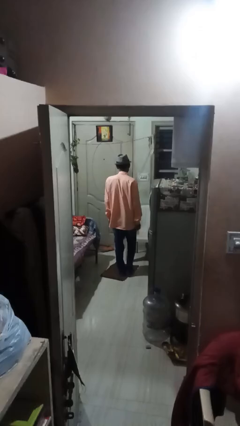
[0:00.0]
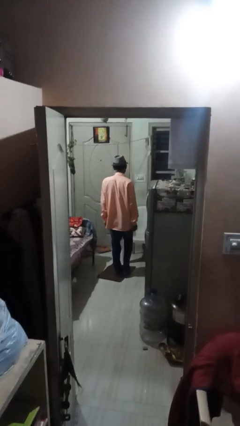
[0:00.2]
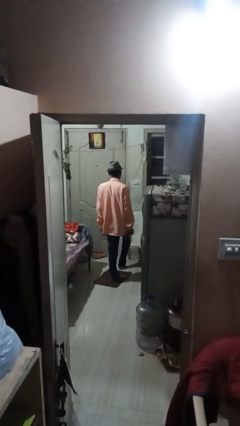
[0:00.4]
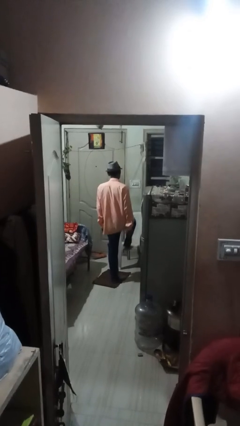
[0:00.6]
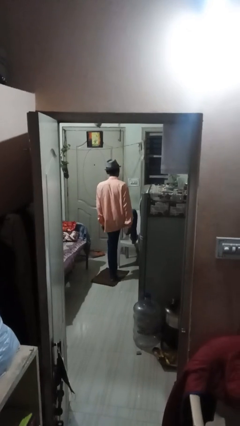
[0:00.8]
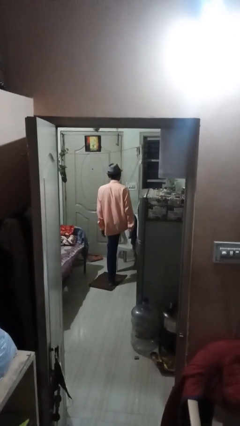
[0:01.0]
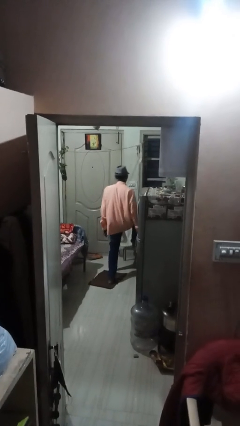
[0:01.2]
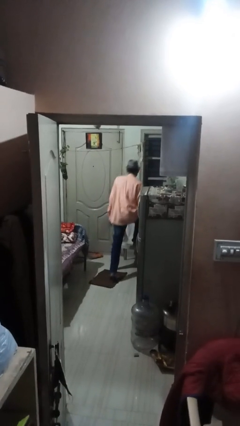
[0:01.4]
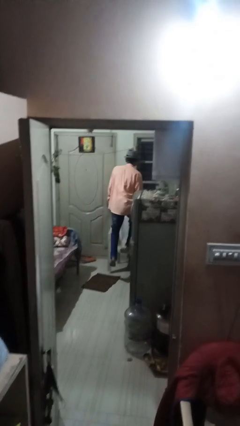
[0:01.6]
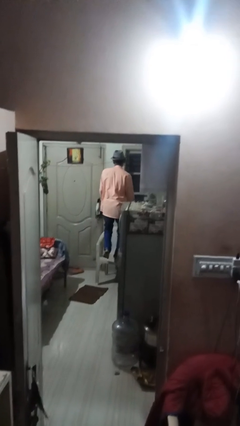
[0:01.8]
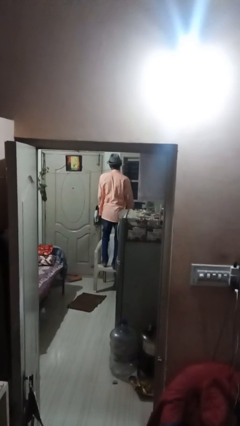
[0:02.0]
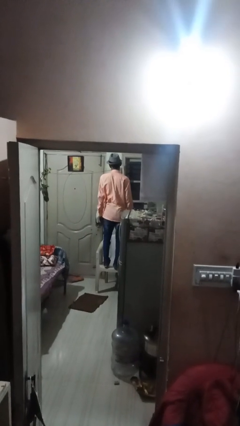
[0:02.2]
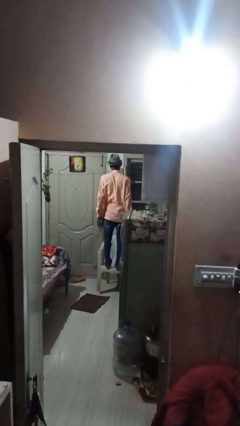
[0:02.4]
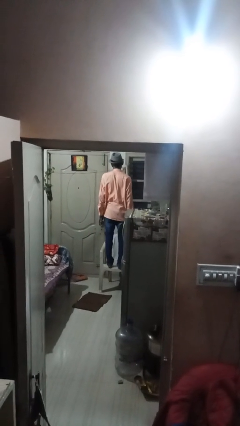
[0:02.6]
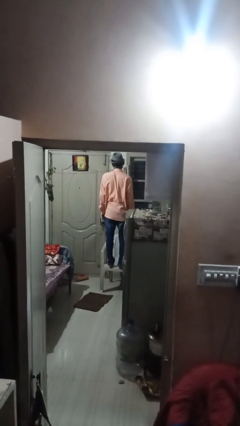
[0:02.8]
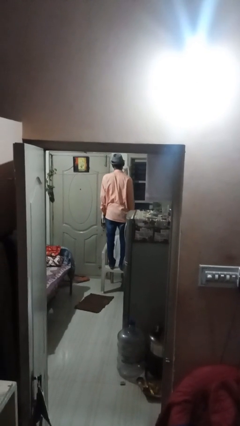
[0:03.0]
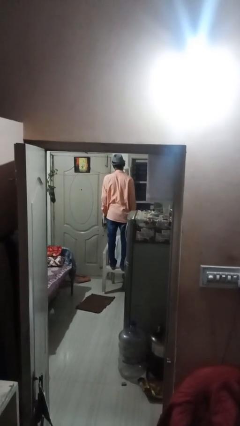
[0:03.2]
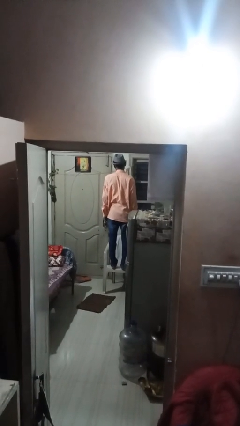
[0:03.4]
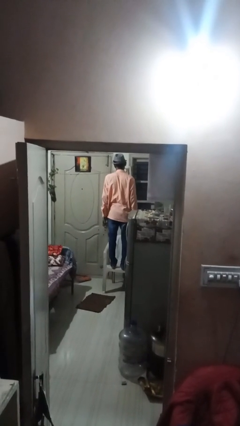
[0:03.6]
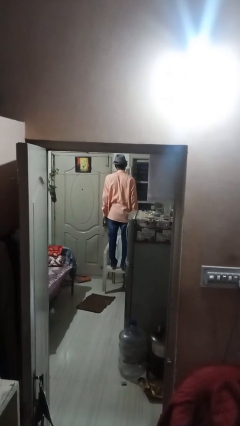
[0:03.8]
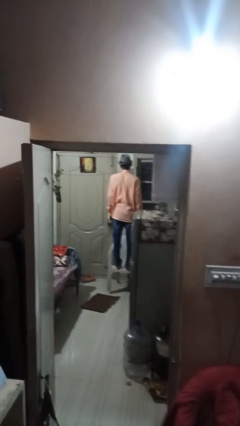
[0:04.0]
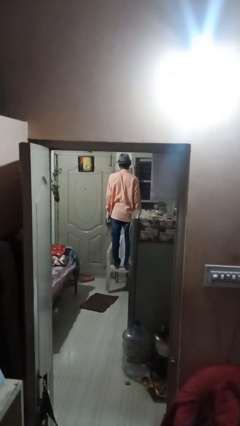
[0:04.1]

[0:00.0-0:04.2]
person climbs on chair

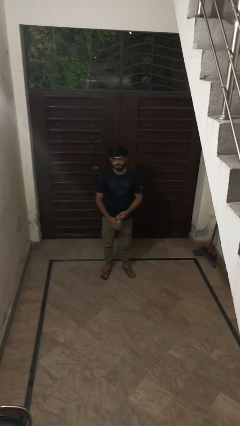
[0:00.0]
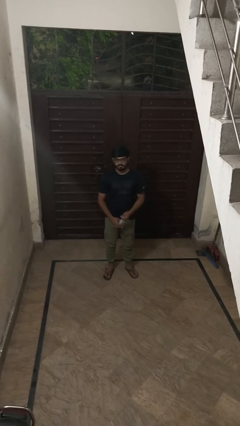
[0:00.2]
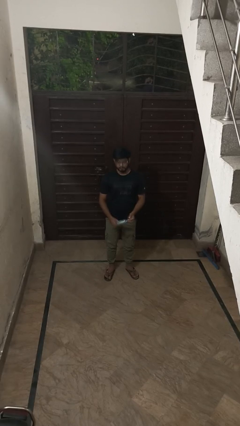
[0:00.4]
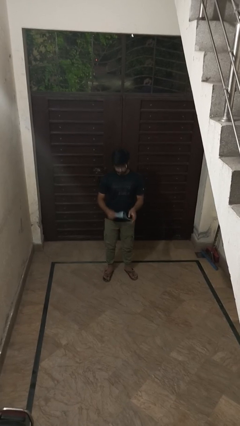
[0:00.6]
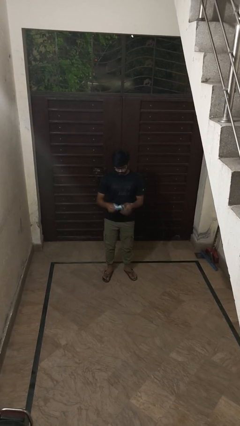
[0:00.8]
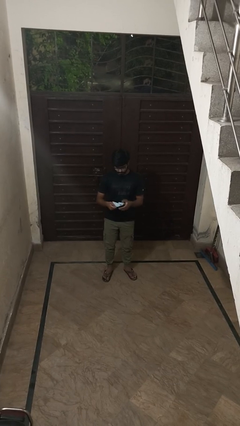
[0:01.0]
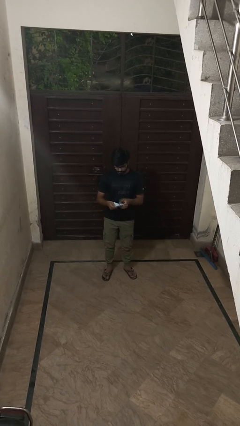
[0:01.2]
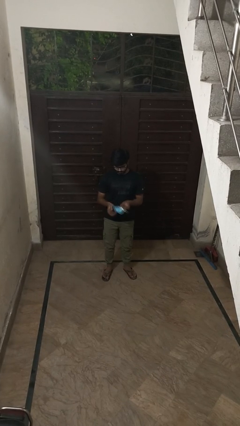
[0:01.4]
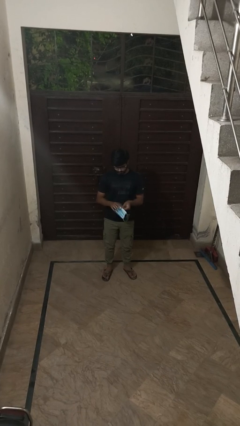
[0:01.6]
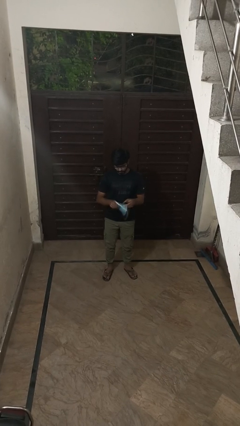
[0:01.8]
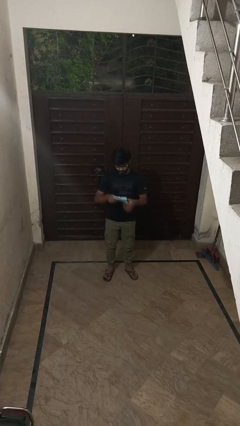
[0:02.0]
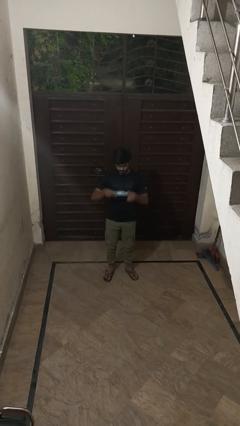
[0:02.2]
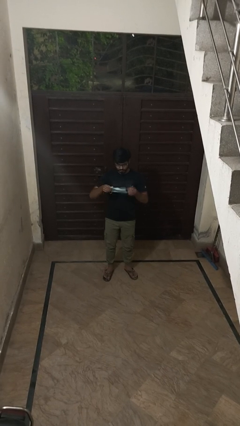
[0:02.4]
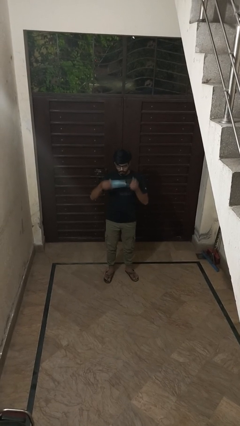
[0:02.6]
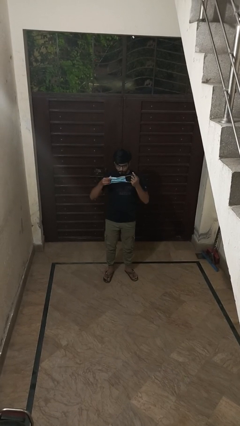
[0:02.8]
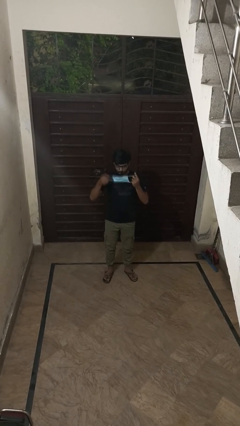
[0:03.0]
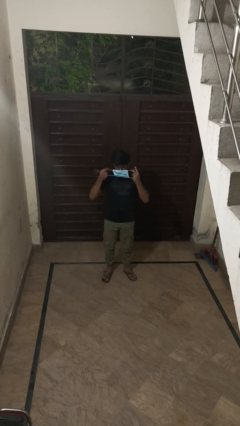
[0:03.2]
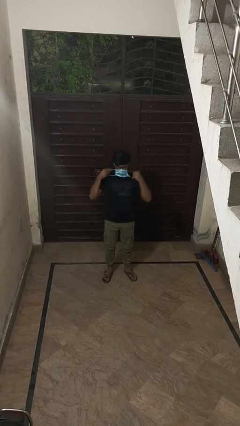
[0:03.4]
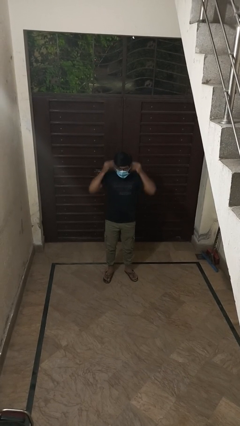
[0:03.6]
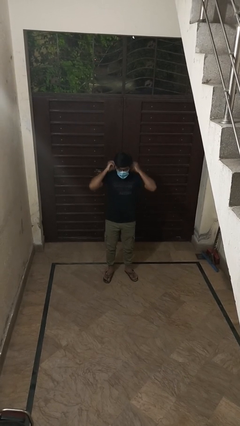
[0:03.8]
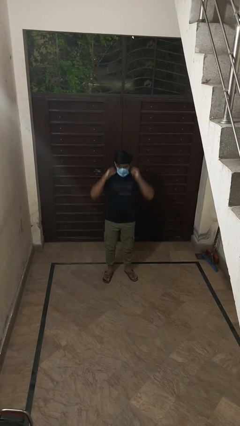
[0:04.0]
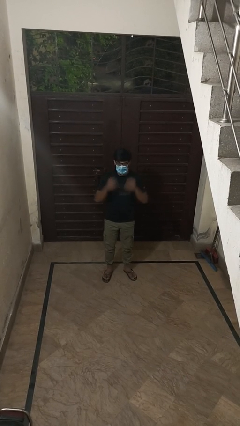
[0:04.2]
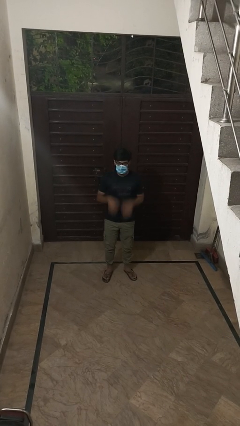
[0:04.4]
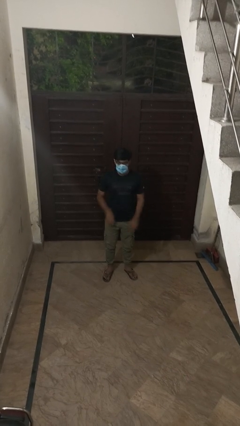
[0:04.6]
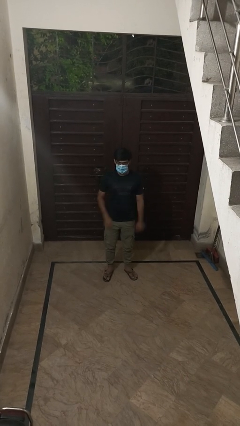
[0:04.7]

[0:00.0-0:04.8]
person puts on facemask

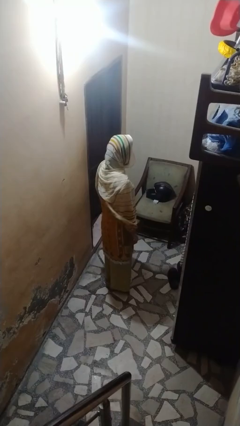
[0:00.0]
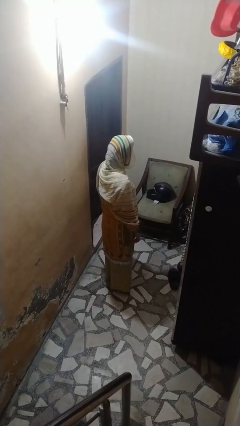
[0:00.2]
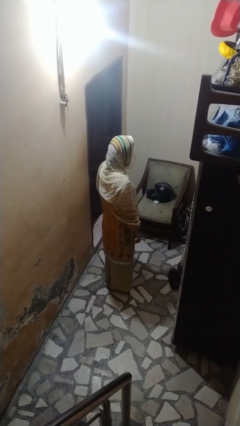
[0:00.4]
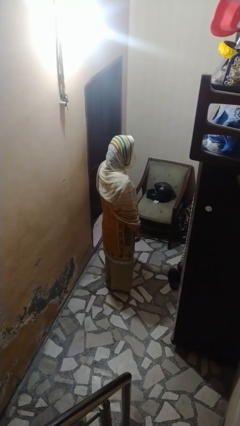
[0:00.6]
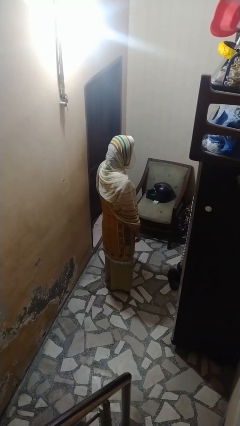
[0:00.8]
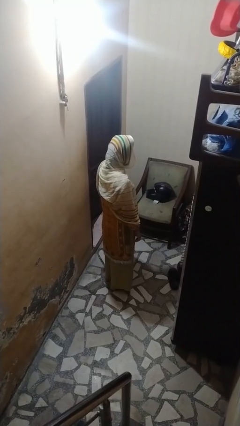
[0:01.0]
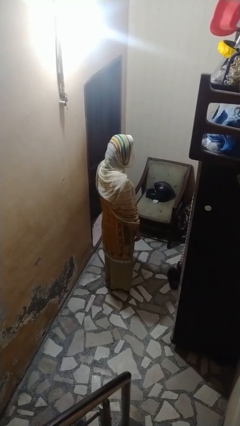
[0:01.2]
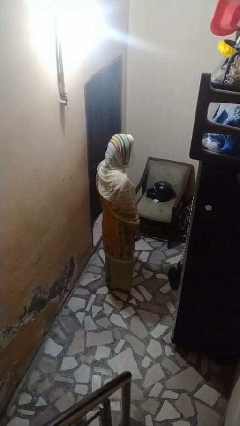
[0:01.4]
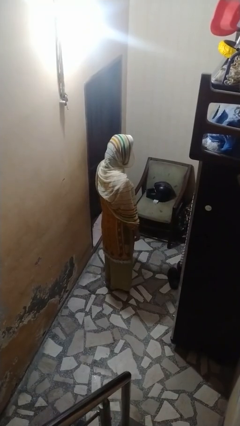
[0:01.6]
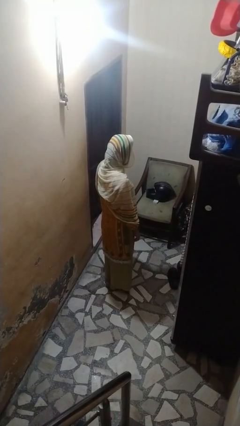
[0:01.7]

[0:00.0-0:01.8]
person gestures lower hand

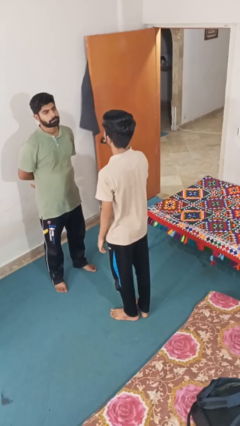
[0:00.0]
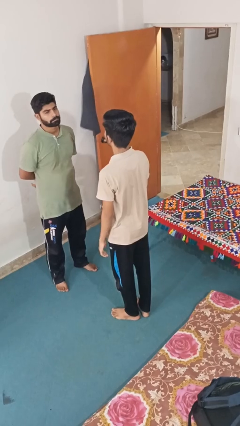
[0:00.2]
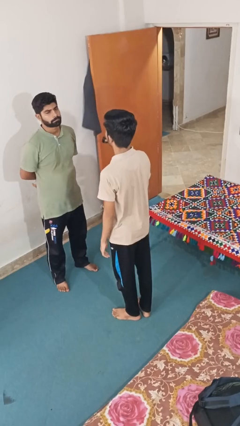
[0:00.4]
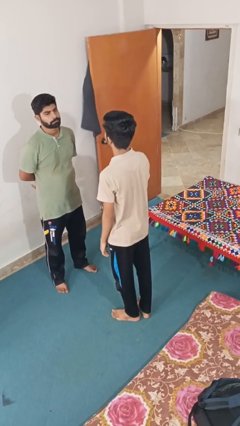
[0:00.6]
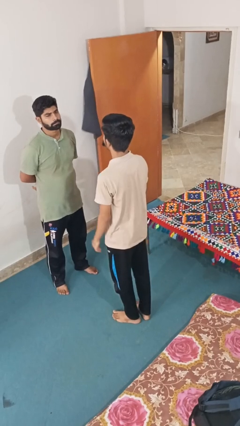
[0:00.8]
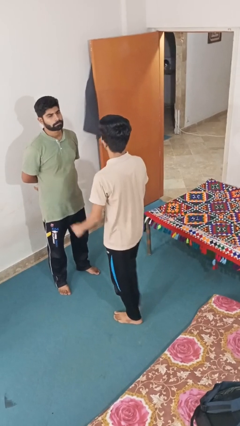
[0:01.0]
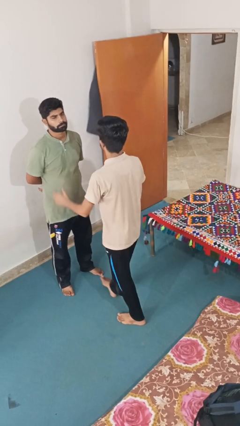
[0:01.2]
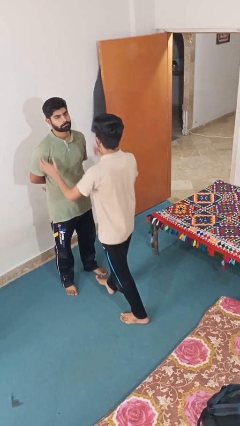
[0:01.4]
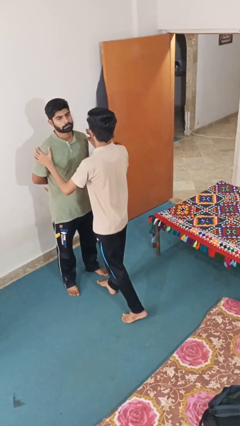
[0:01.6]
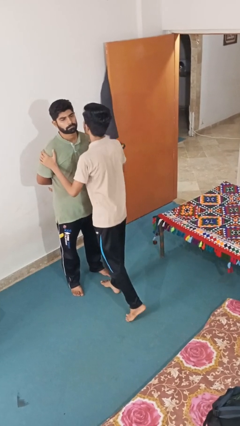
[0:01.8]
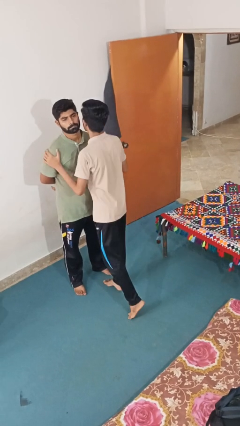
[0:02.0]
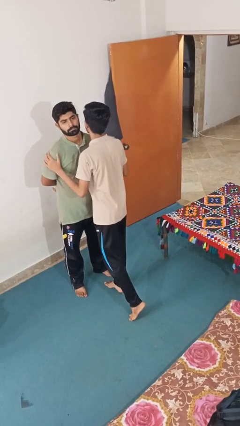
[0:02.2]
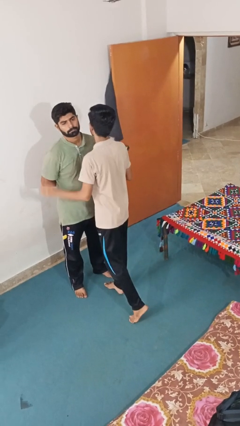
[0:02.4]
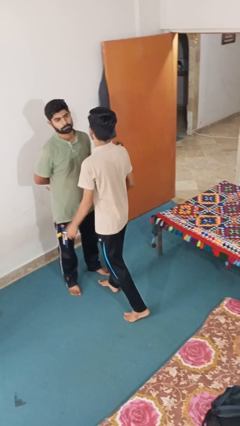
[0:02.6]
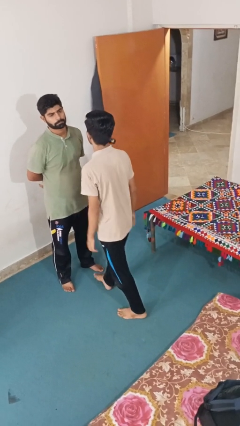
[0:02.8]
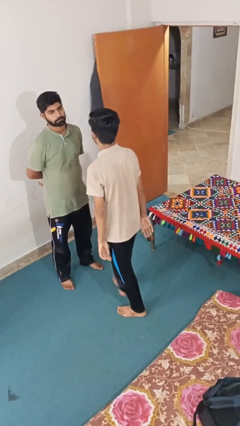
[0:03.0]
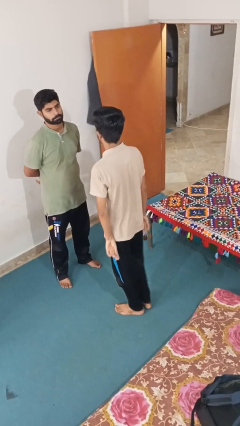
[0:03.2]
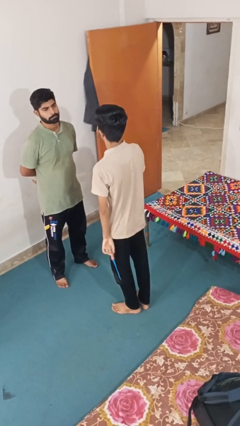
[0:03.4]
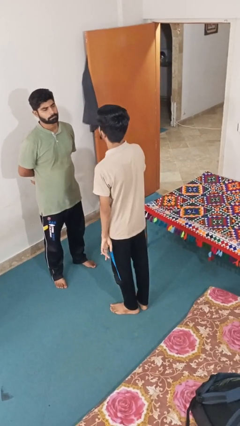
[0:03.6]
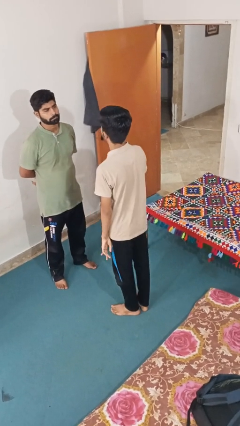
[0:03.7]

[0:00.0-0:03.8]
person kisses cheek of person

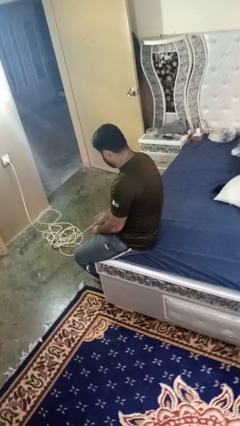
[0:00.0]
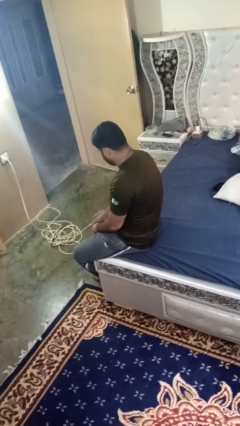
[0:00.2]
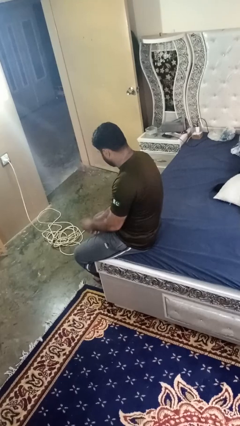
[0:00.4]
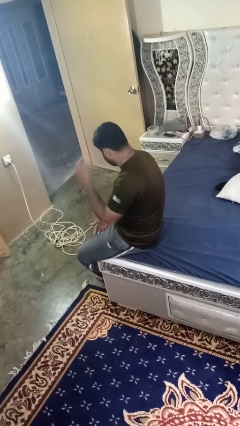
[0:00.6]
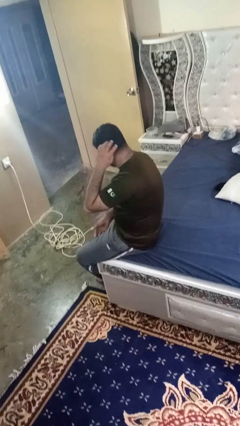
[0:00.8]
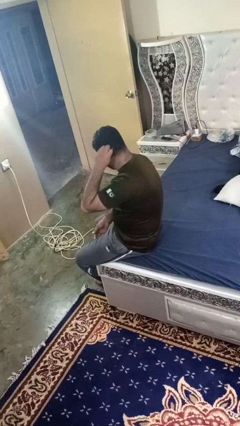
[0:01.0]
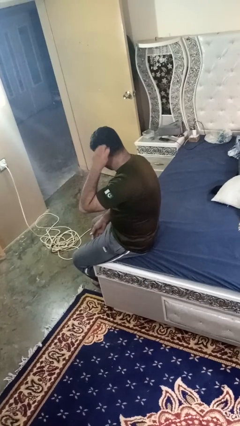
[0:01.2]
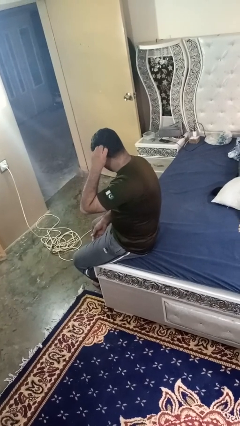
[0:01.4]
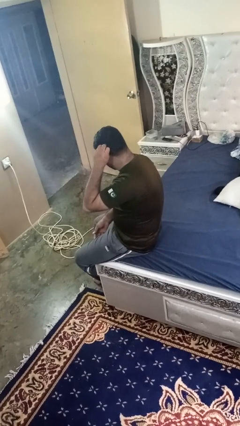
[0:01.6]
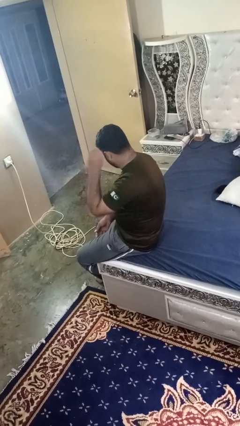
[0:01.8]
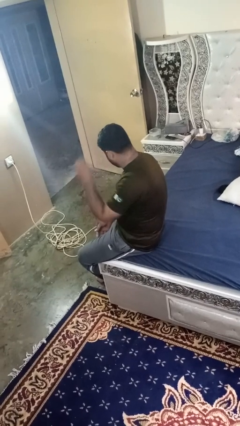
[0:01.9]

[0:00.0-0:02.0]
person strokes hair

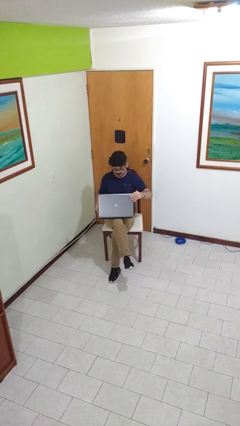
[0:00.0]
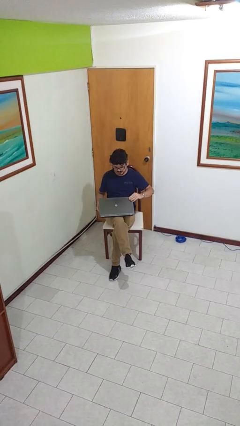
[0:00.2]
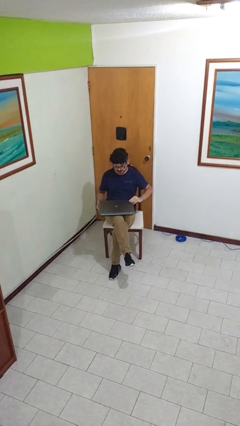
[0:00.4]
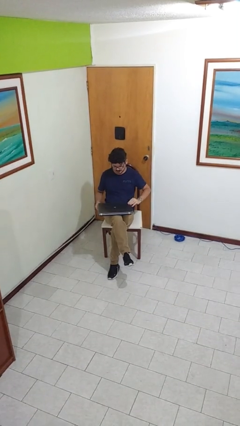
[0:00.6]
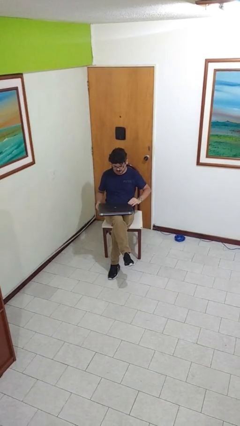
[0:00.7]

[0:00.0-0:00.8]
person closes laptop

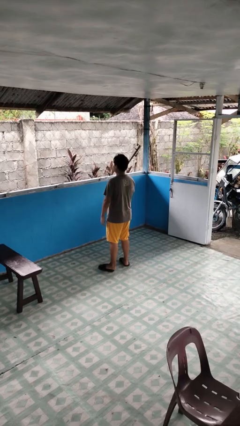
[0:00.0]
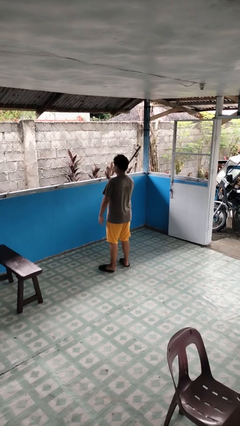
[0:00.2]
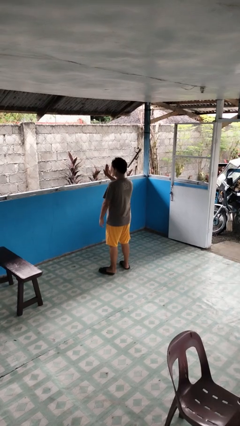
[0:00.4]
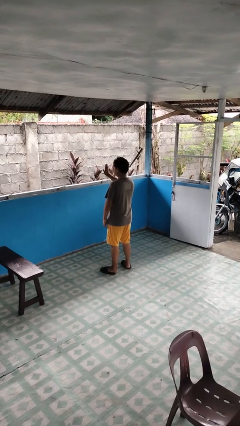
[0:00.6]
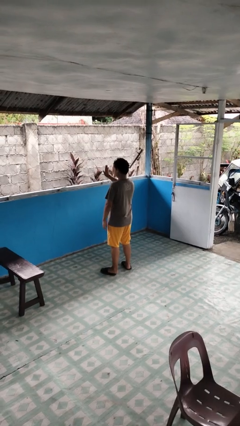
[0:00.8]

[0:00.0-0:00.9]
person gestures stop
